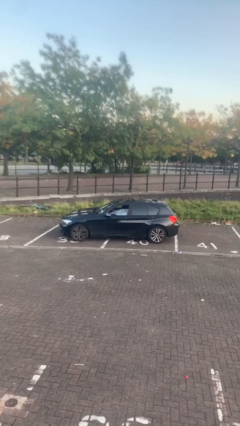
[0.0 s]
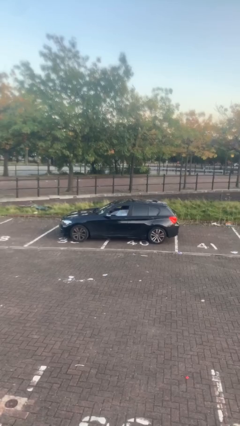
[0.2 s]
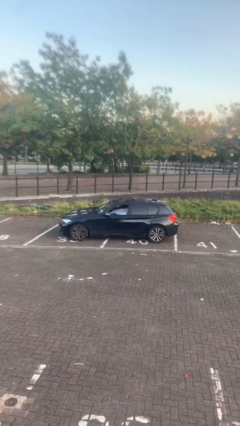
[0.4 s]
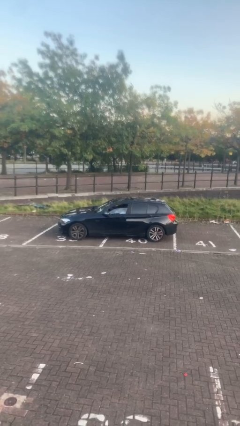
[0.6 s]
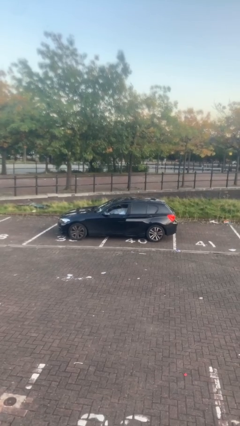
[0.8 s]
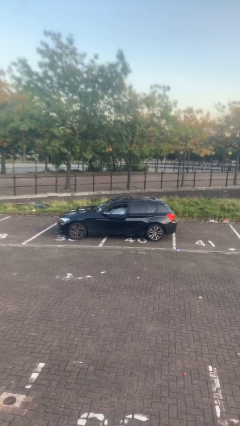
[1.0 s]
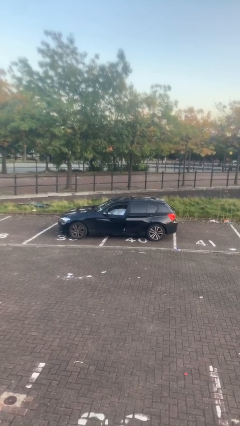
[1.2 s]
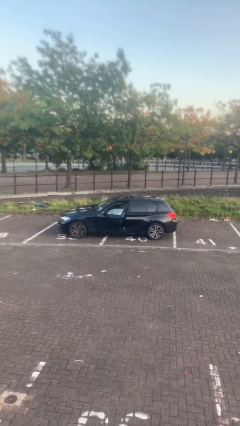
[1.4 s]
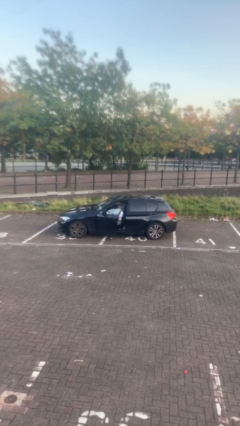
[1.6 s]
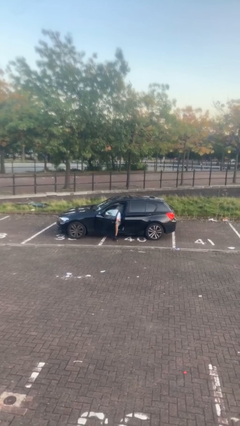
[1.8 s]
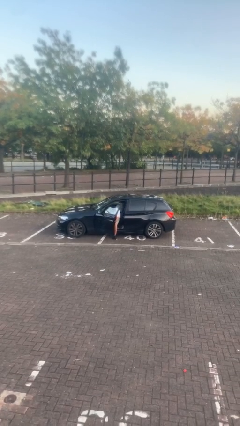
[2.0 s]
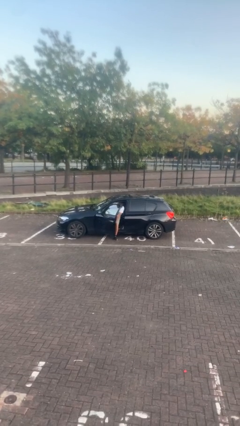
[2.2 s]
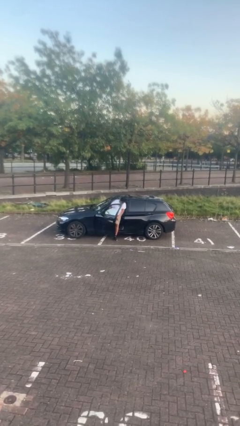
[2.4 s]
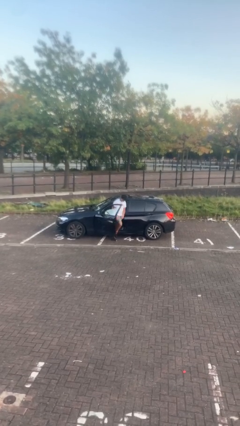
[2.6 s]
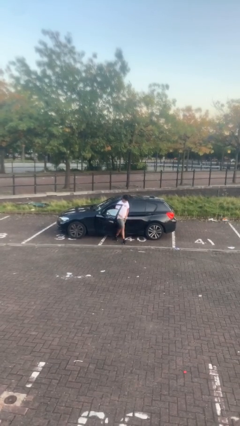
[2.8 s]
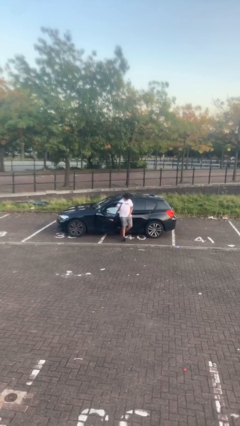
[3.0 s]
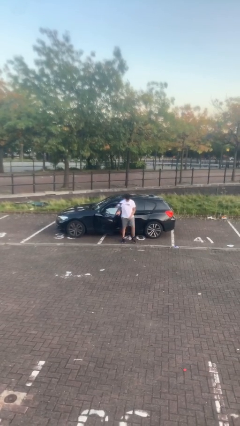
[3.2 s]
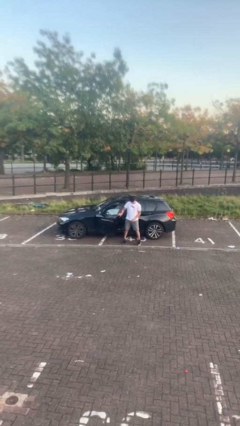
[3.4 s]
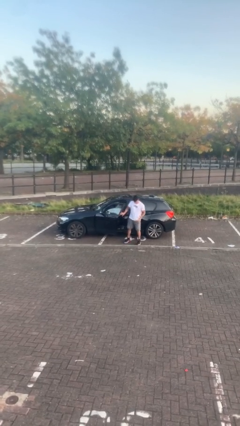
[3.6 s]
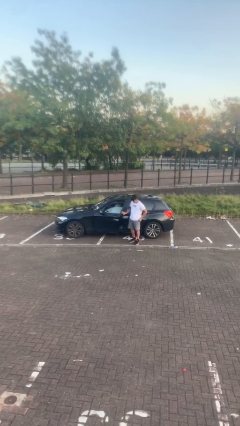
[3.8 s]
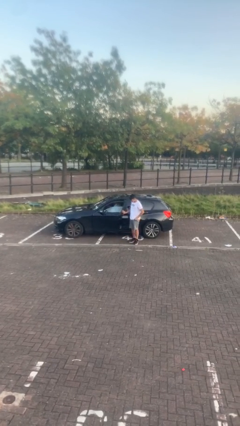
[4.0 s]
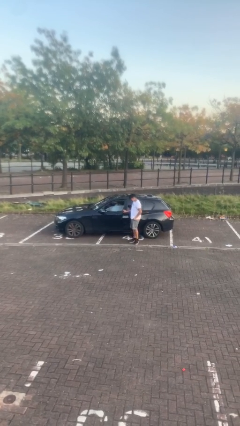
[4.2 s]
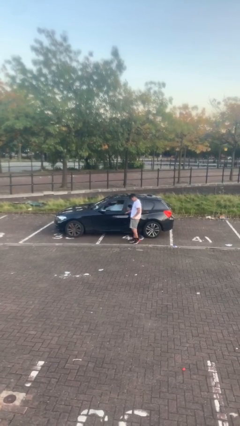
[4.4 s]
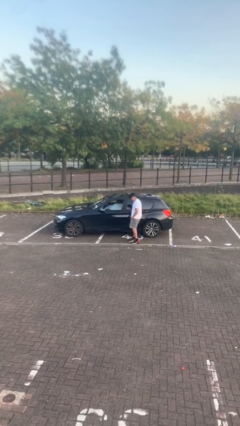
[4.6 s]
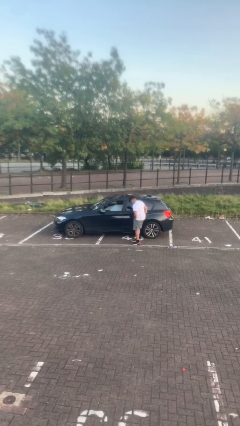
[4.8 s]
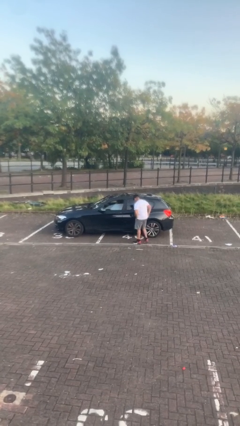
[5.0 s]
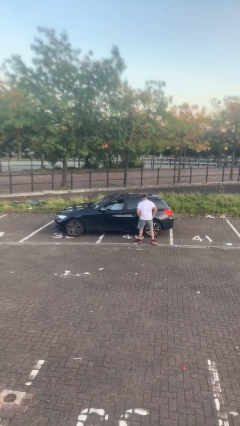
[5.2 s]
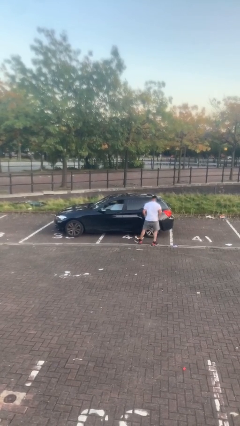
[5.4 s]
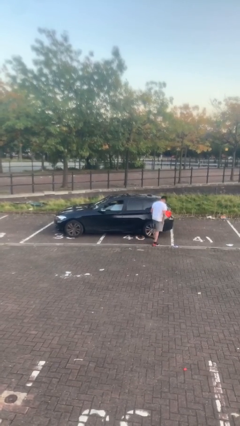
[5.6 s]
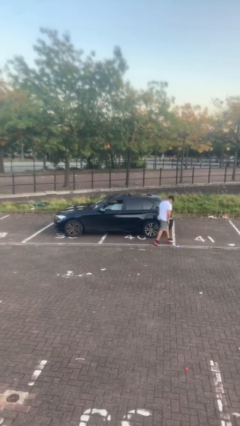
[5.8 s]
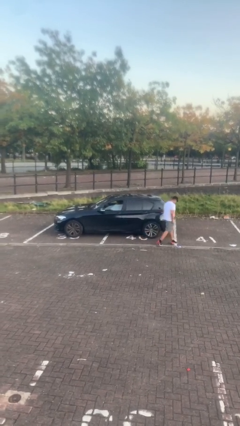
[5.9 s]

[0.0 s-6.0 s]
car drops off person

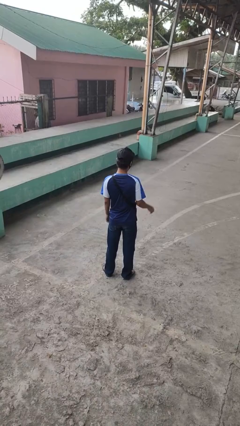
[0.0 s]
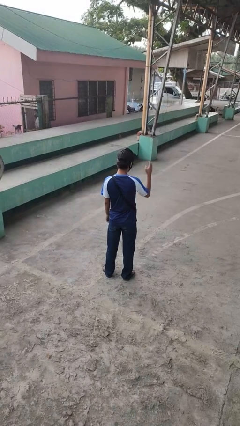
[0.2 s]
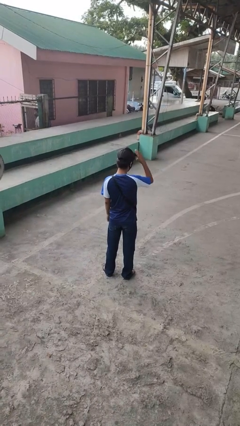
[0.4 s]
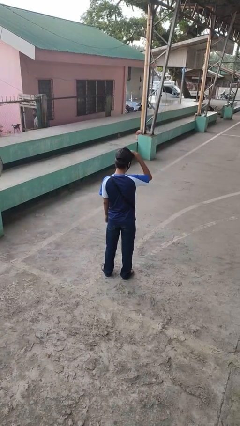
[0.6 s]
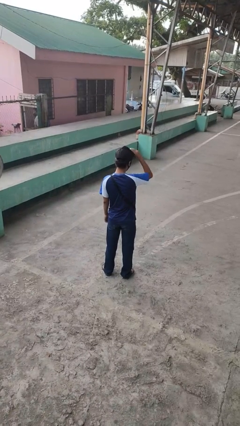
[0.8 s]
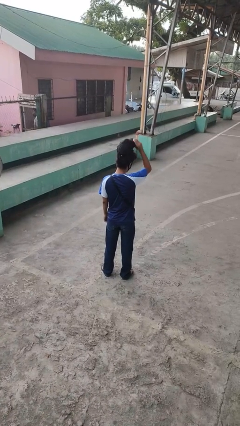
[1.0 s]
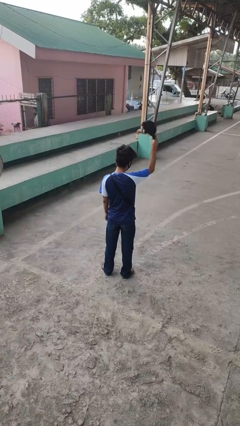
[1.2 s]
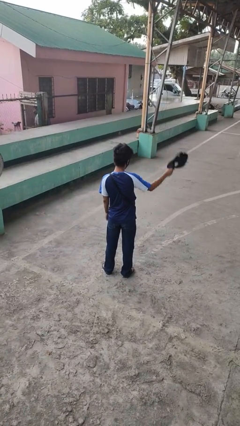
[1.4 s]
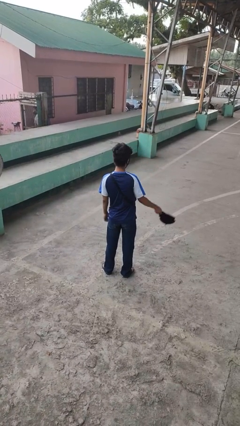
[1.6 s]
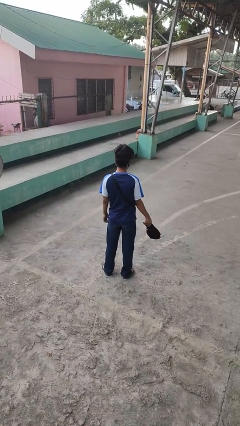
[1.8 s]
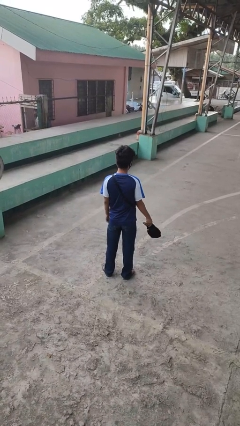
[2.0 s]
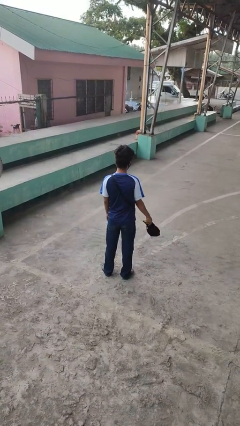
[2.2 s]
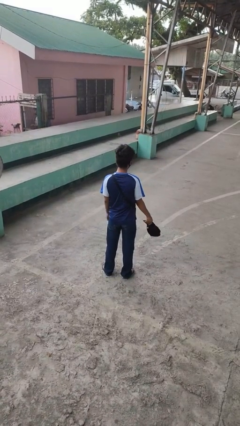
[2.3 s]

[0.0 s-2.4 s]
person takes off hat

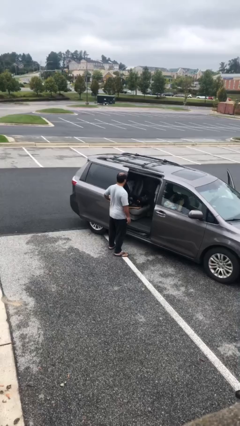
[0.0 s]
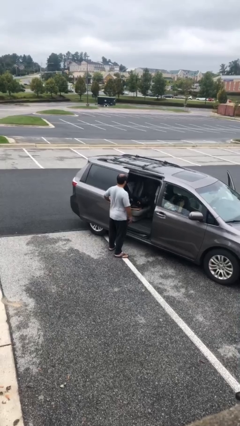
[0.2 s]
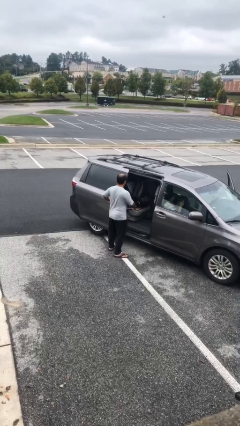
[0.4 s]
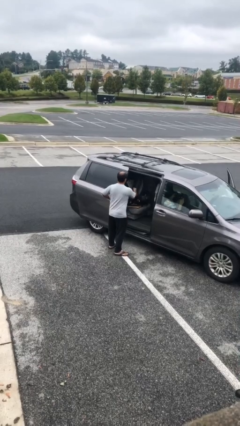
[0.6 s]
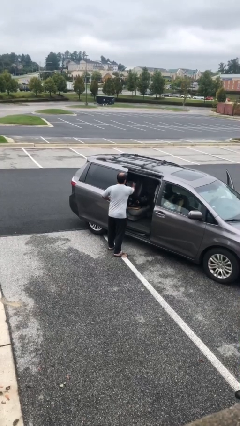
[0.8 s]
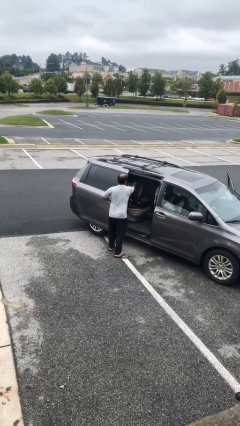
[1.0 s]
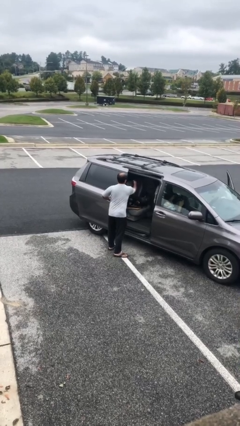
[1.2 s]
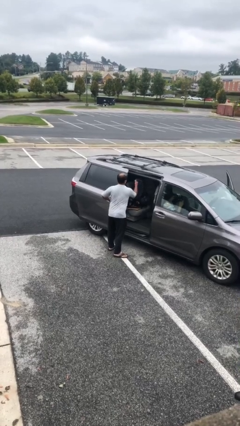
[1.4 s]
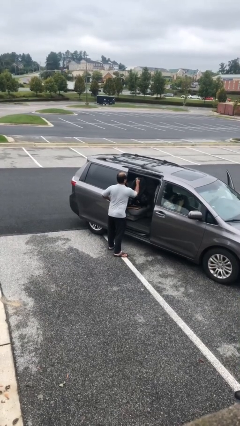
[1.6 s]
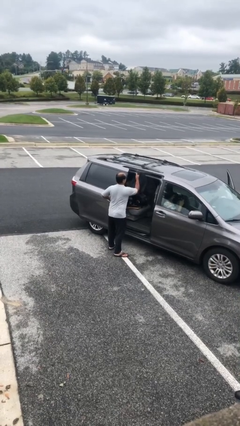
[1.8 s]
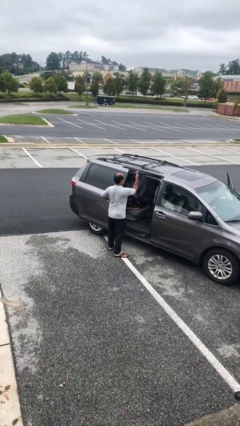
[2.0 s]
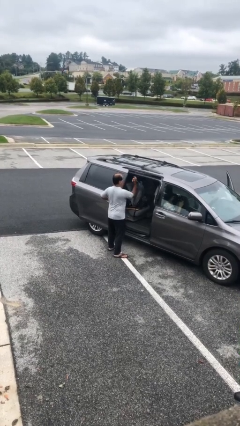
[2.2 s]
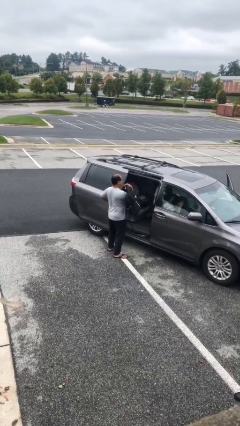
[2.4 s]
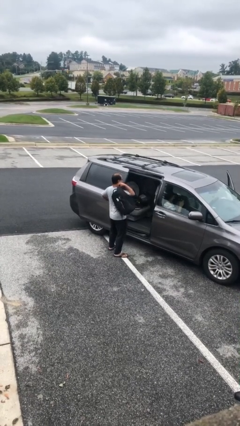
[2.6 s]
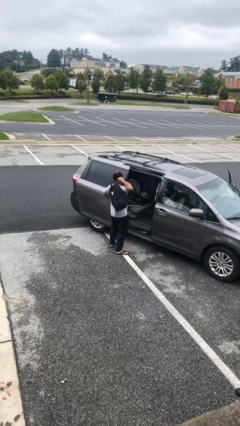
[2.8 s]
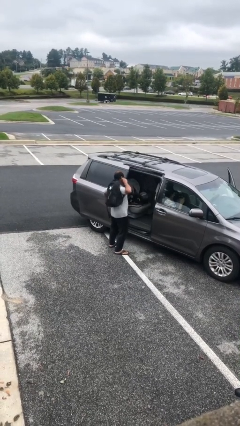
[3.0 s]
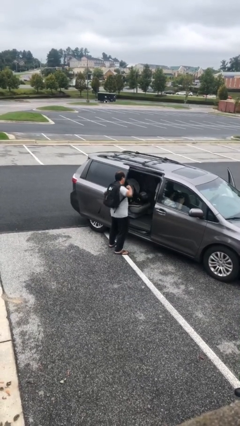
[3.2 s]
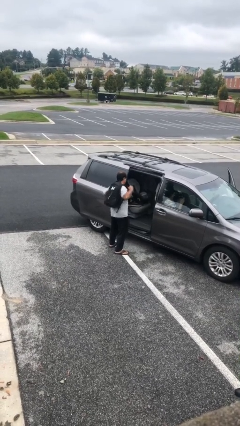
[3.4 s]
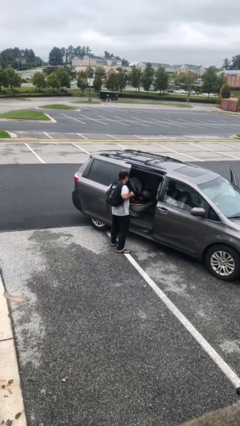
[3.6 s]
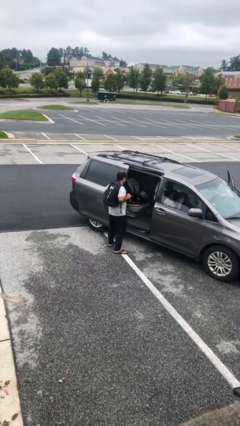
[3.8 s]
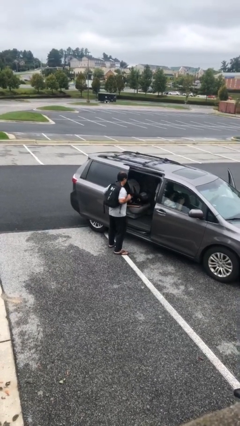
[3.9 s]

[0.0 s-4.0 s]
person unloads car

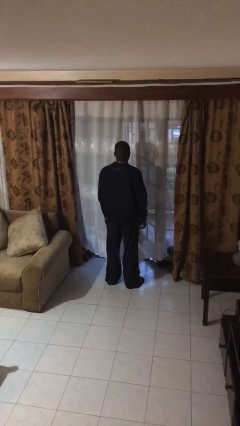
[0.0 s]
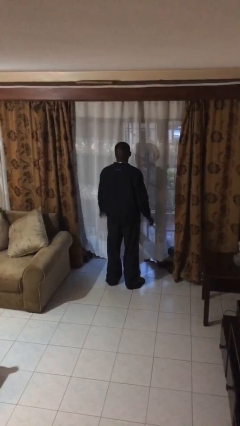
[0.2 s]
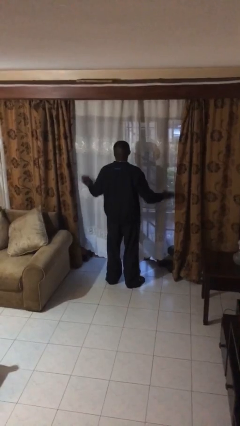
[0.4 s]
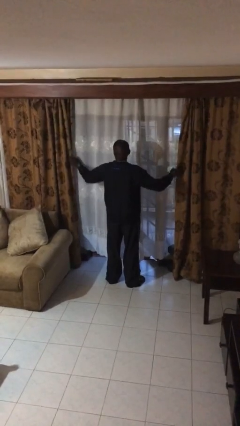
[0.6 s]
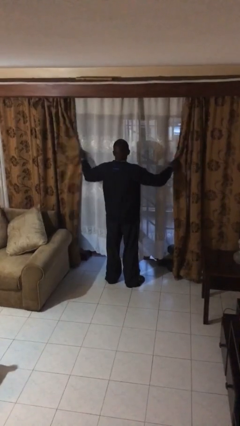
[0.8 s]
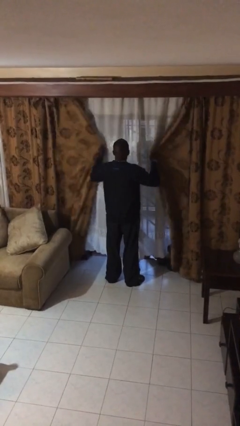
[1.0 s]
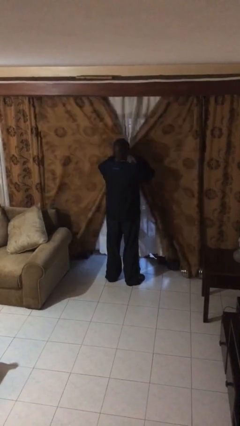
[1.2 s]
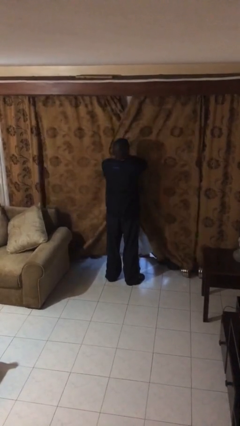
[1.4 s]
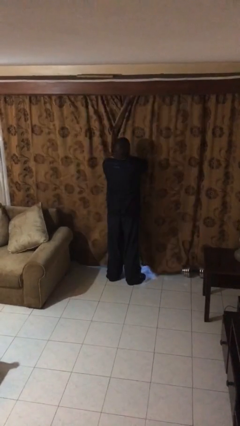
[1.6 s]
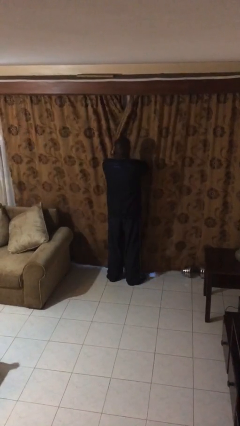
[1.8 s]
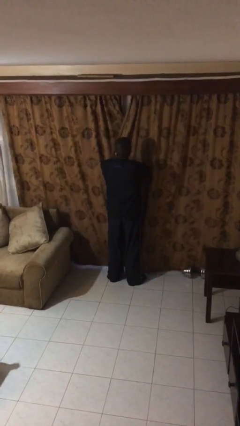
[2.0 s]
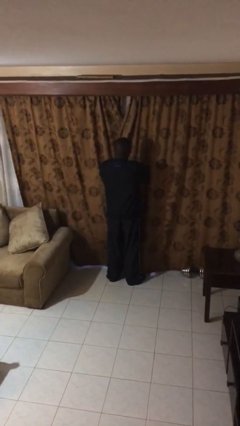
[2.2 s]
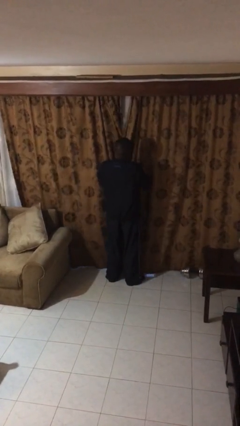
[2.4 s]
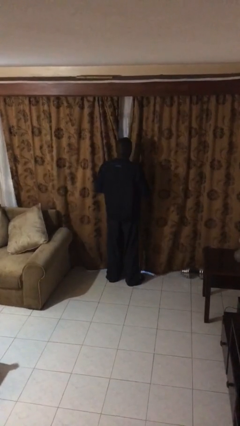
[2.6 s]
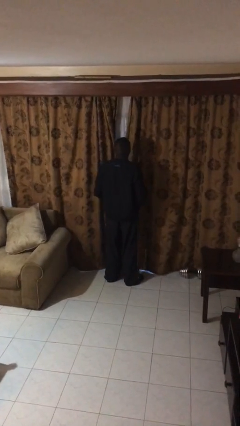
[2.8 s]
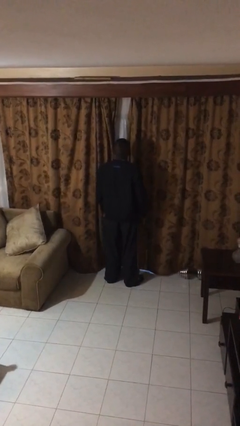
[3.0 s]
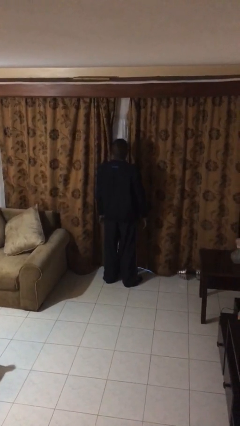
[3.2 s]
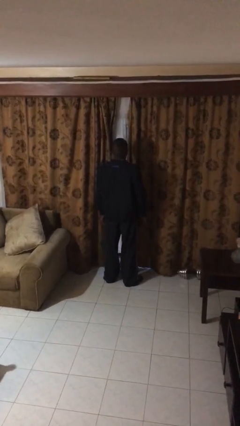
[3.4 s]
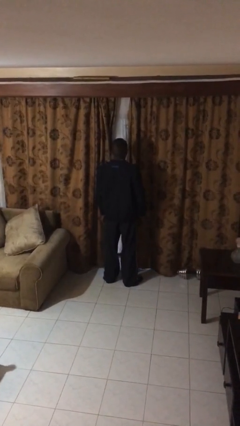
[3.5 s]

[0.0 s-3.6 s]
person closes curtains

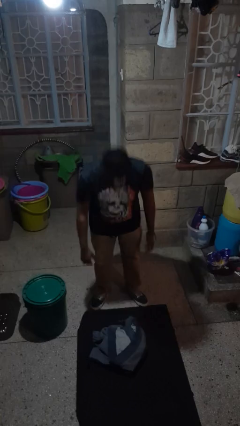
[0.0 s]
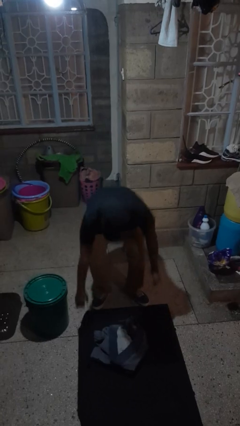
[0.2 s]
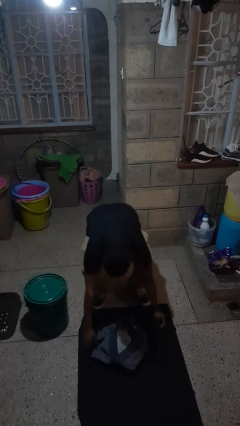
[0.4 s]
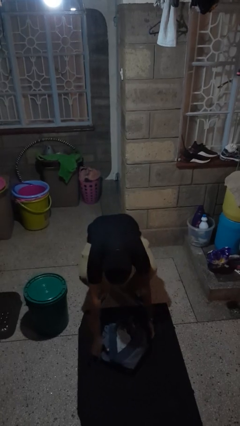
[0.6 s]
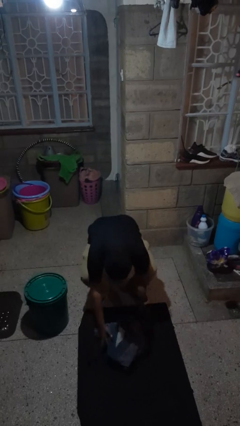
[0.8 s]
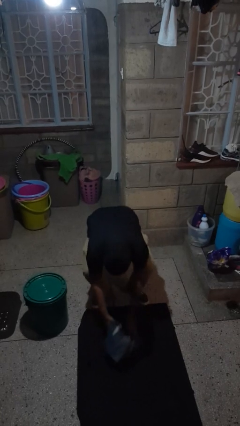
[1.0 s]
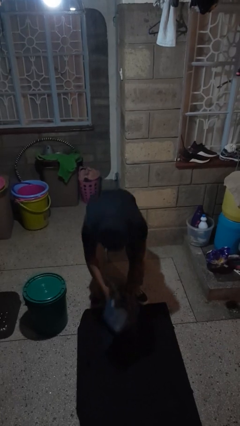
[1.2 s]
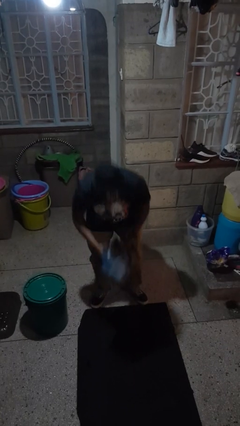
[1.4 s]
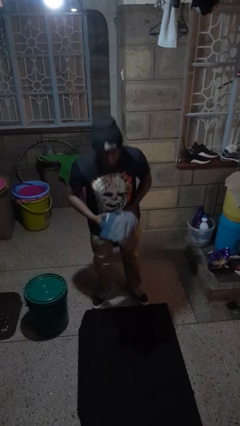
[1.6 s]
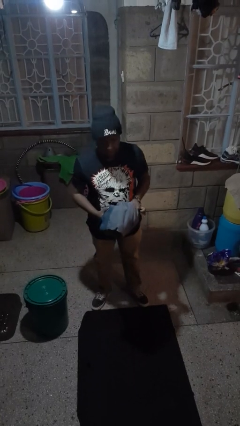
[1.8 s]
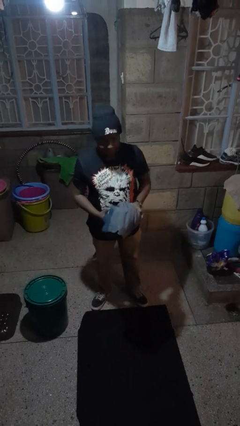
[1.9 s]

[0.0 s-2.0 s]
person picks up object from floor
